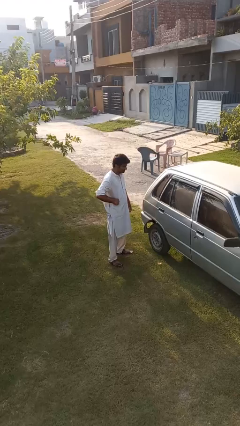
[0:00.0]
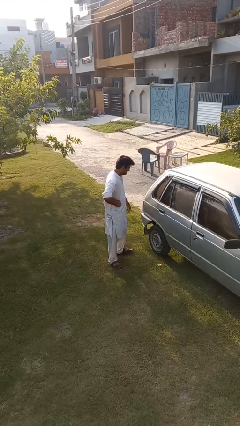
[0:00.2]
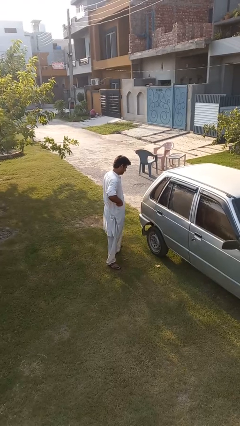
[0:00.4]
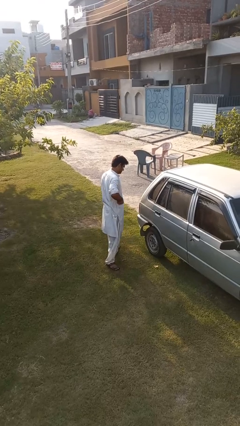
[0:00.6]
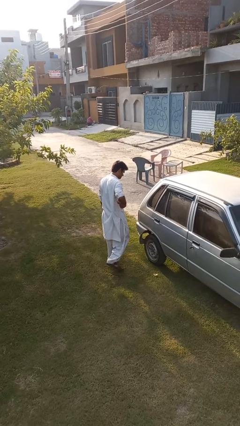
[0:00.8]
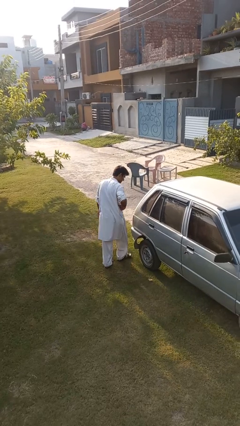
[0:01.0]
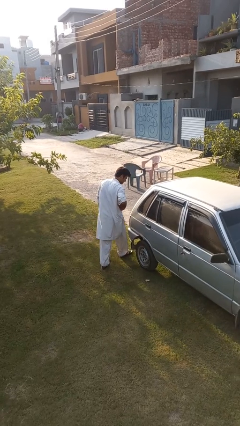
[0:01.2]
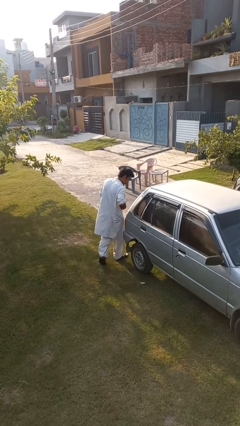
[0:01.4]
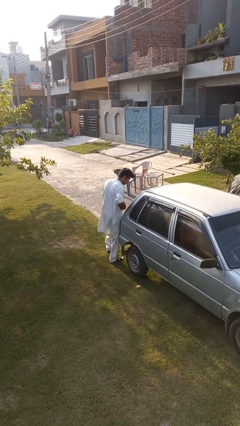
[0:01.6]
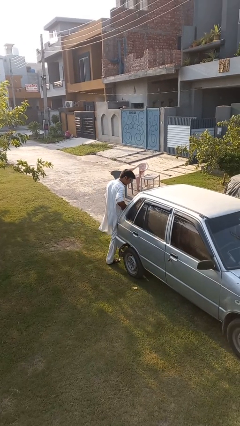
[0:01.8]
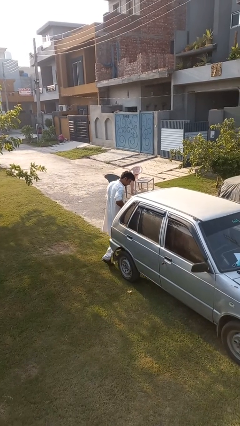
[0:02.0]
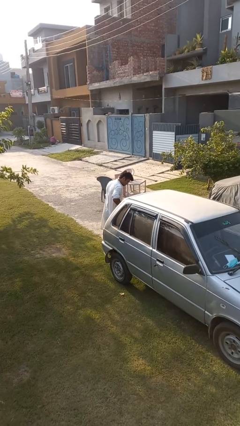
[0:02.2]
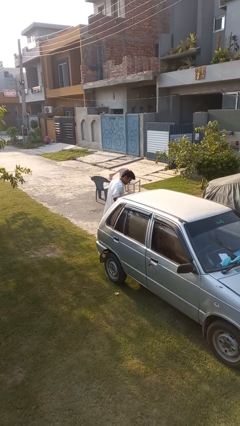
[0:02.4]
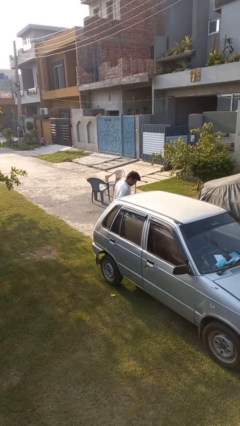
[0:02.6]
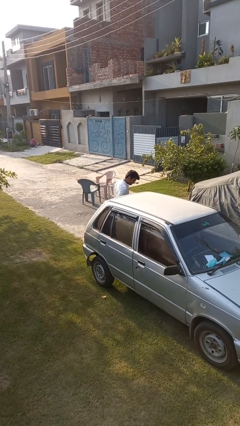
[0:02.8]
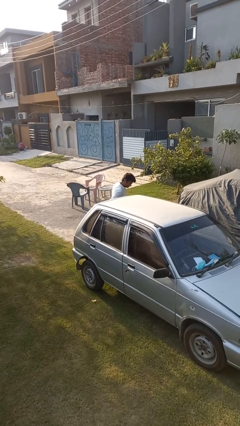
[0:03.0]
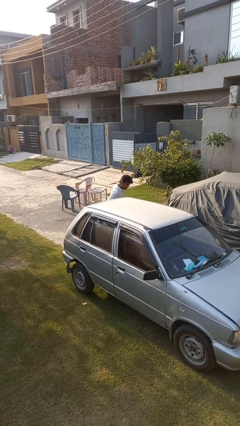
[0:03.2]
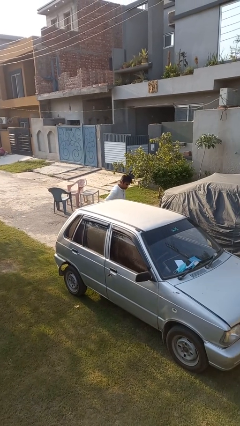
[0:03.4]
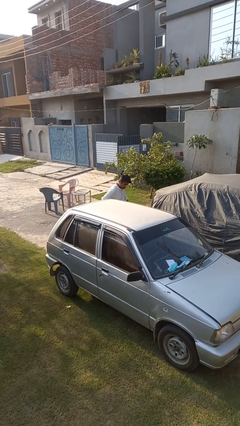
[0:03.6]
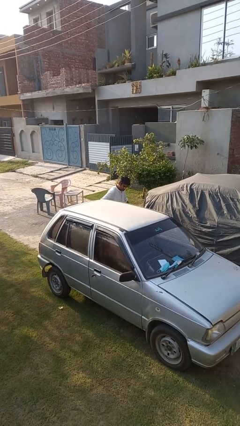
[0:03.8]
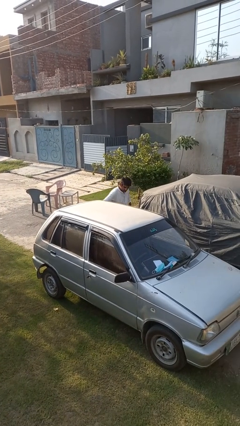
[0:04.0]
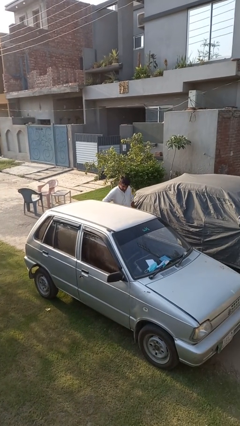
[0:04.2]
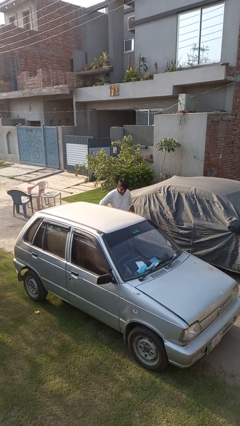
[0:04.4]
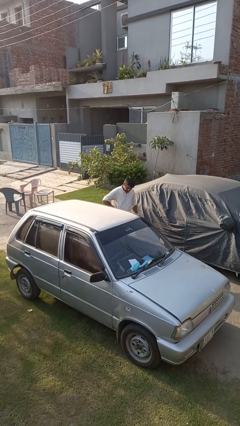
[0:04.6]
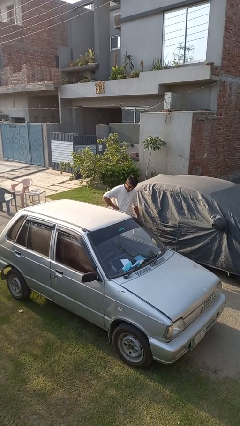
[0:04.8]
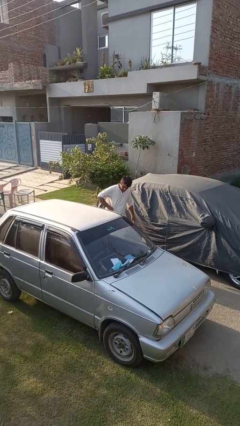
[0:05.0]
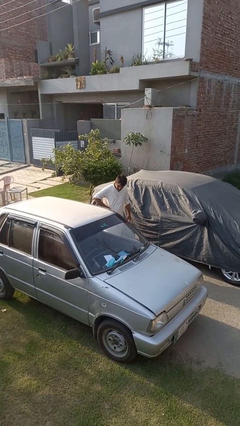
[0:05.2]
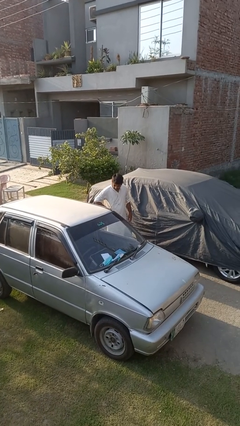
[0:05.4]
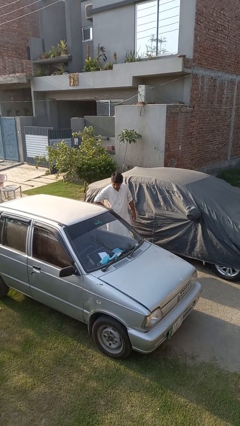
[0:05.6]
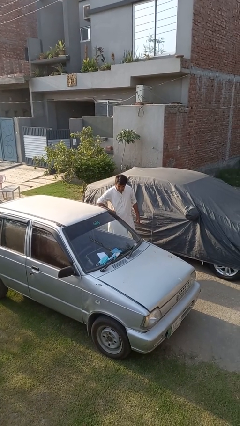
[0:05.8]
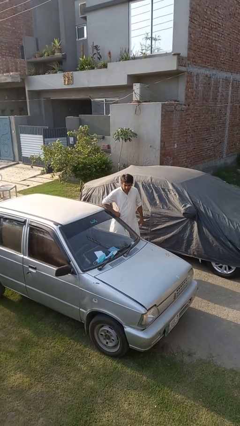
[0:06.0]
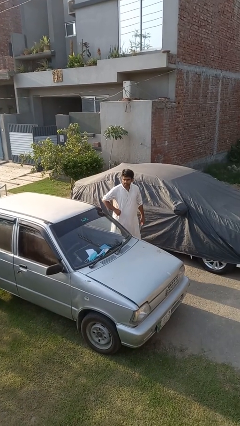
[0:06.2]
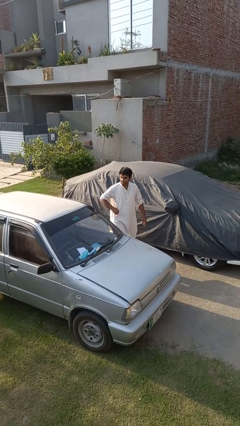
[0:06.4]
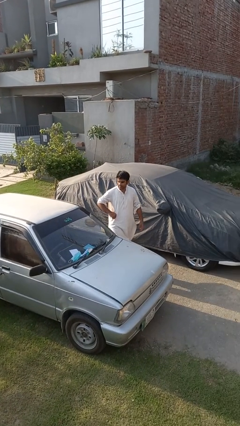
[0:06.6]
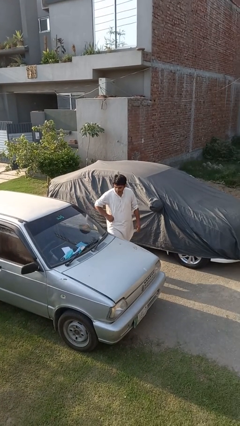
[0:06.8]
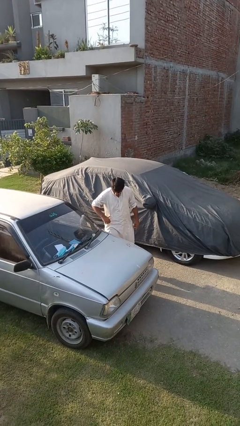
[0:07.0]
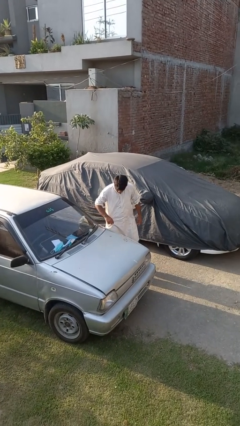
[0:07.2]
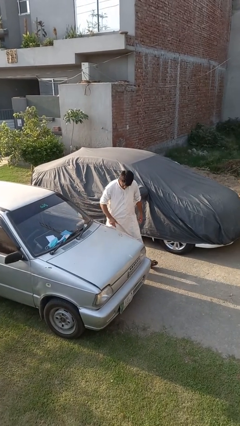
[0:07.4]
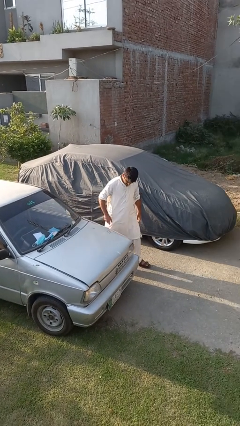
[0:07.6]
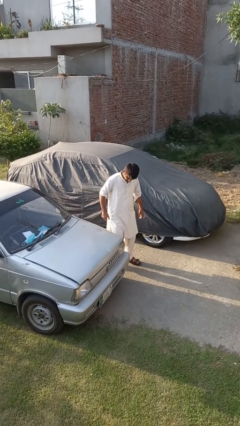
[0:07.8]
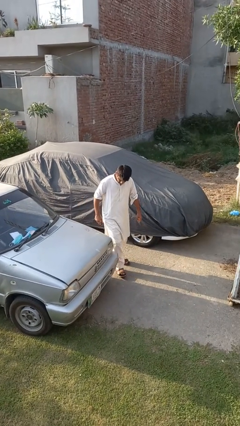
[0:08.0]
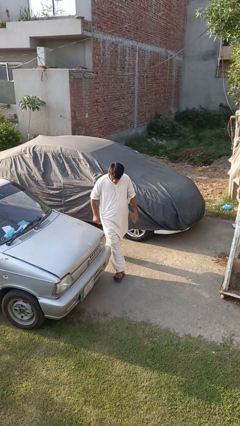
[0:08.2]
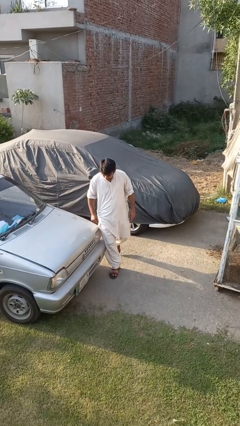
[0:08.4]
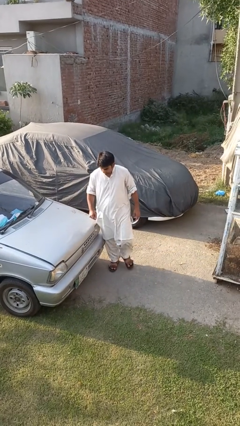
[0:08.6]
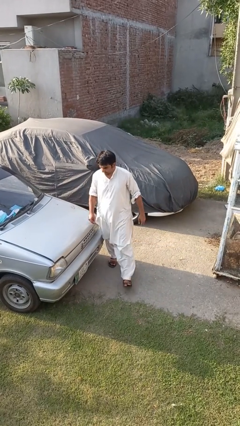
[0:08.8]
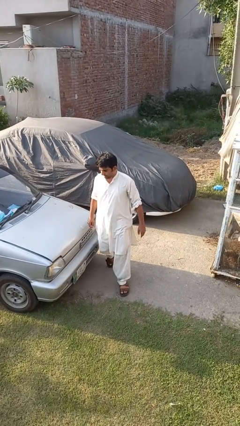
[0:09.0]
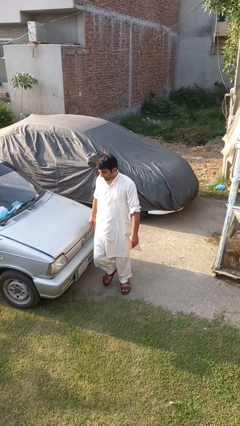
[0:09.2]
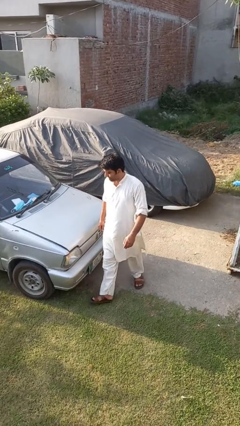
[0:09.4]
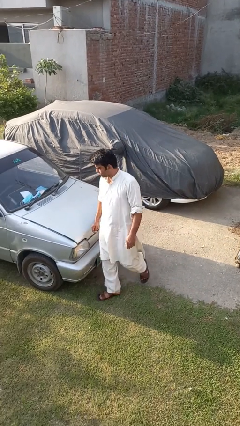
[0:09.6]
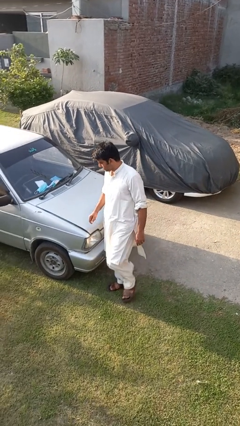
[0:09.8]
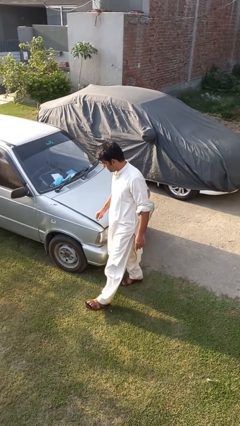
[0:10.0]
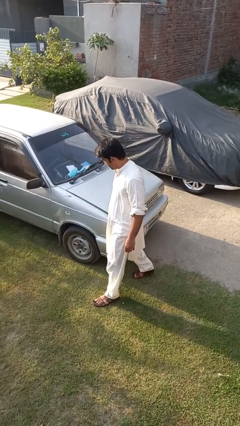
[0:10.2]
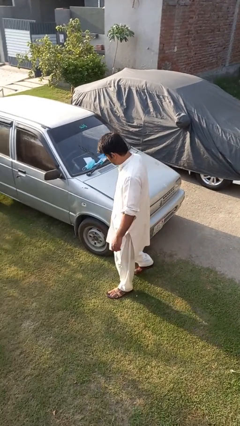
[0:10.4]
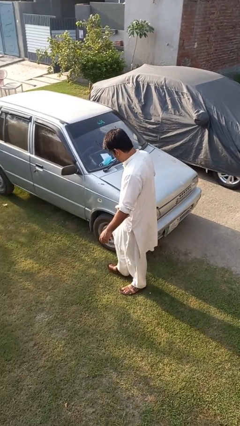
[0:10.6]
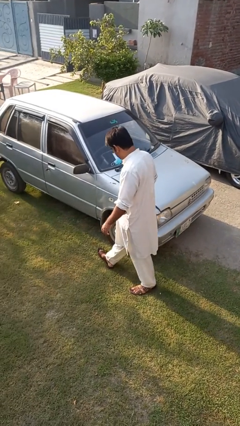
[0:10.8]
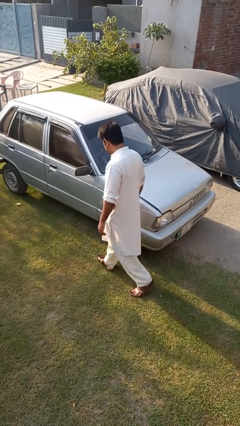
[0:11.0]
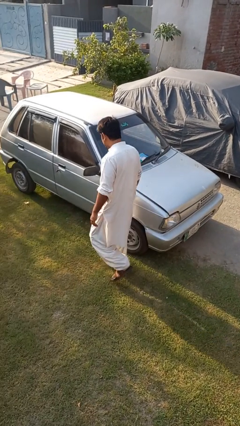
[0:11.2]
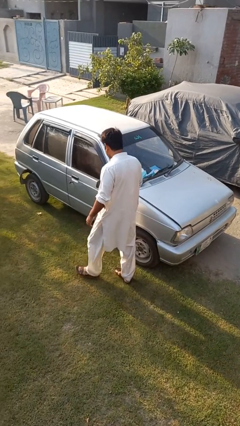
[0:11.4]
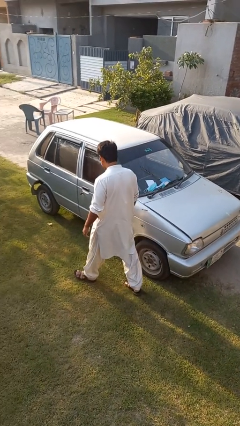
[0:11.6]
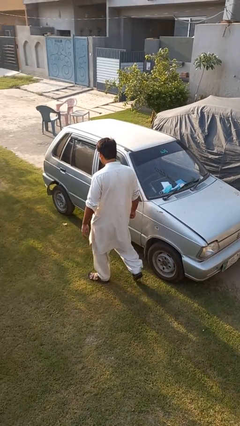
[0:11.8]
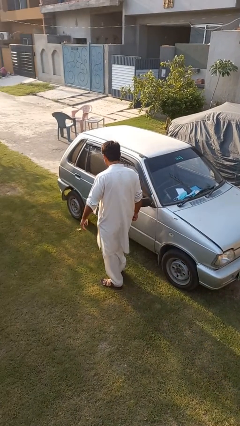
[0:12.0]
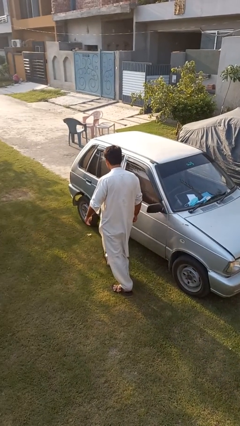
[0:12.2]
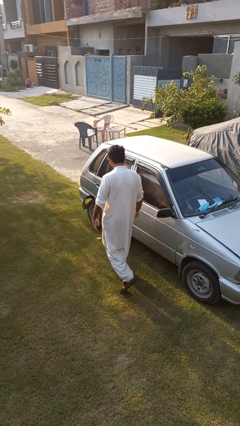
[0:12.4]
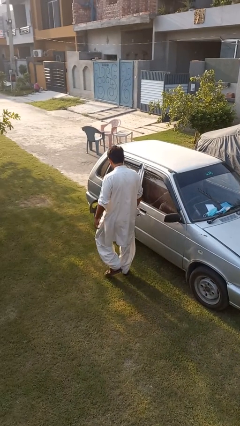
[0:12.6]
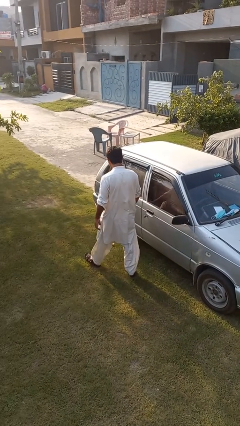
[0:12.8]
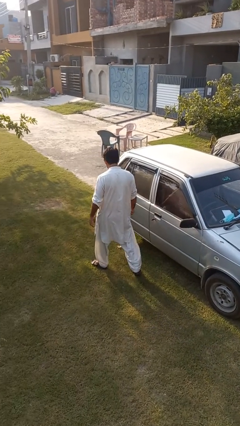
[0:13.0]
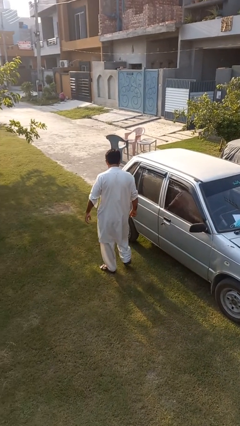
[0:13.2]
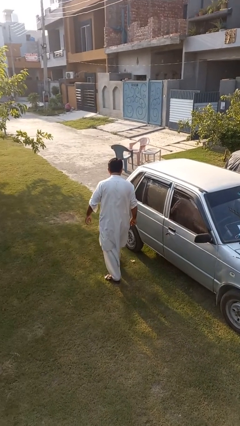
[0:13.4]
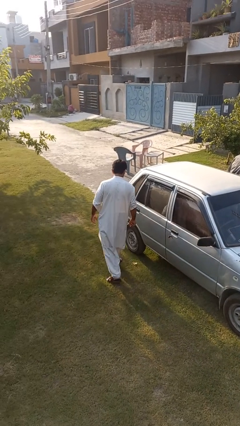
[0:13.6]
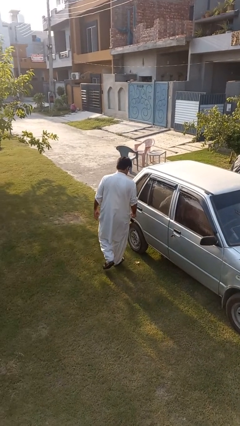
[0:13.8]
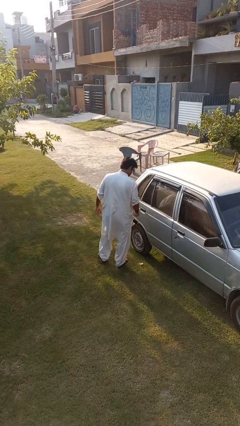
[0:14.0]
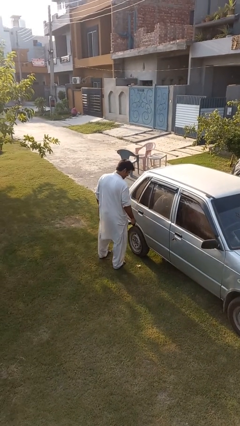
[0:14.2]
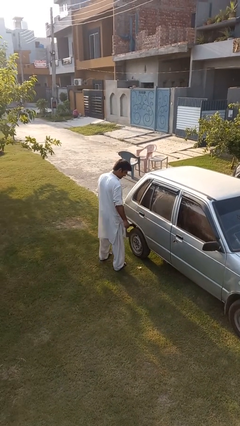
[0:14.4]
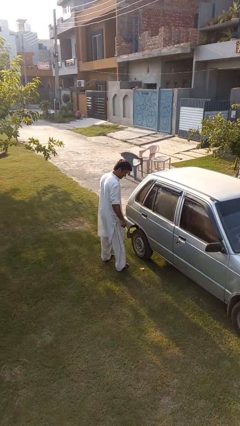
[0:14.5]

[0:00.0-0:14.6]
person walks around car

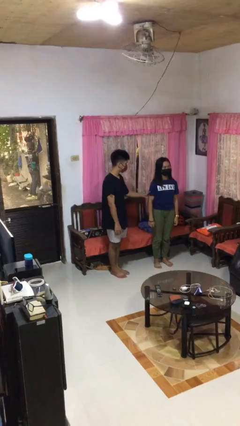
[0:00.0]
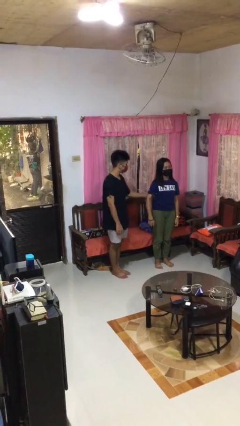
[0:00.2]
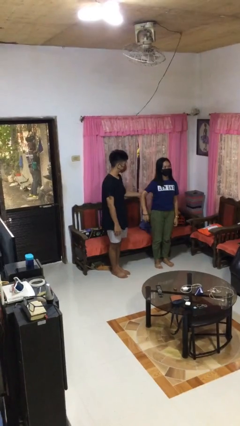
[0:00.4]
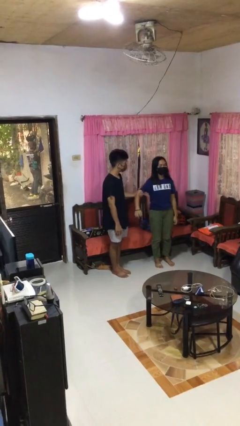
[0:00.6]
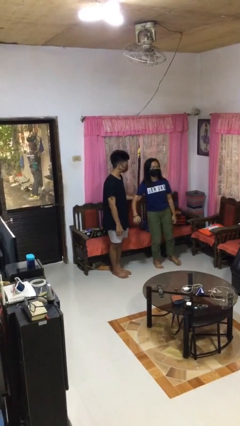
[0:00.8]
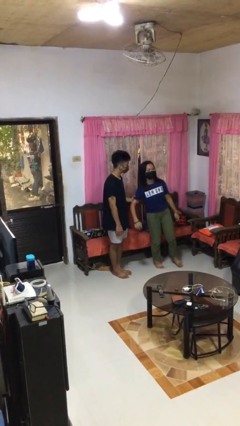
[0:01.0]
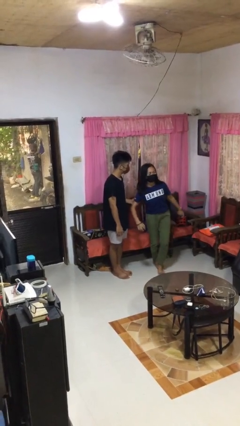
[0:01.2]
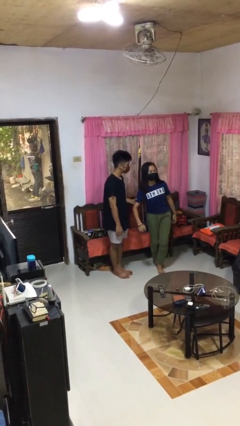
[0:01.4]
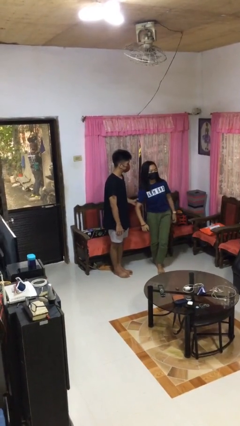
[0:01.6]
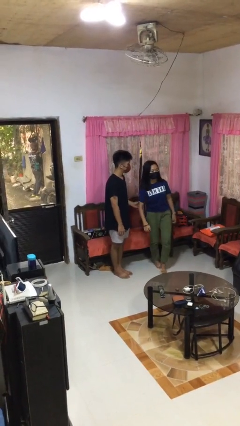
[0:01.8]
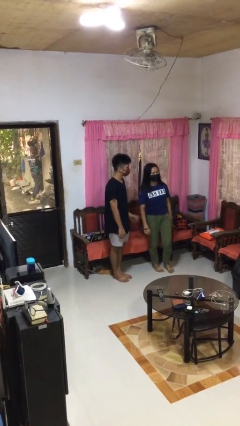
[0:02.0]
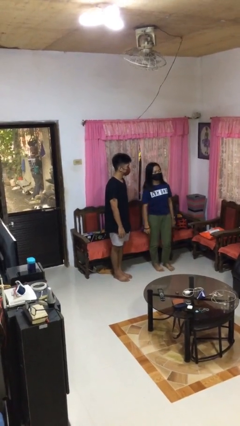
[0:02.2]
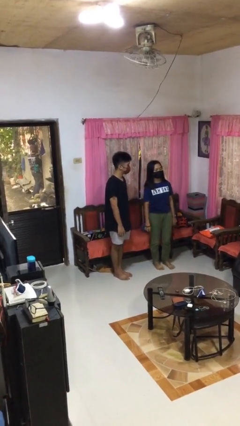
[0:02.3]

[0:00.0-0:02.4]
person grabs person by bicep

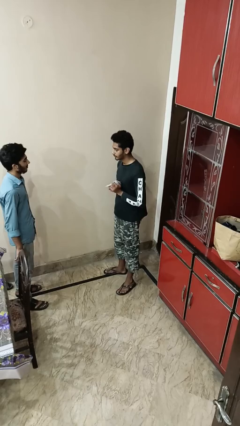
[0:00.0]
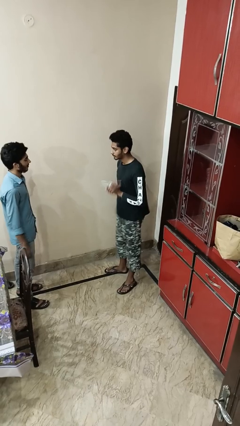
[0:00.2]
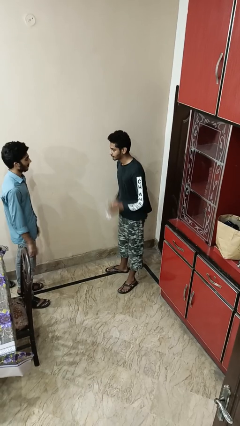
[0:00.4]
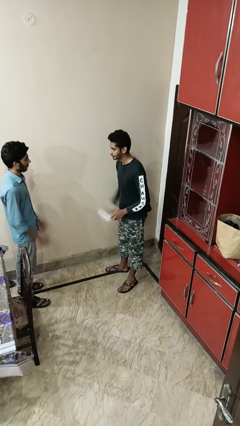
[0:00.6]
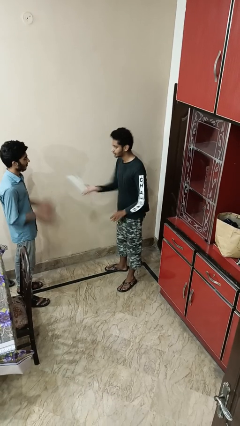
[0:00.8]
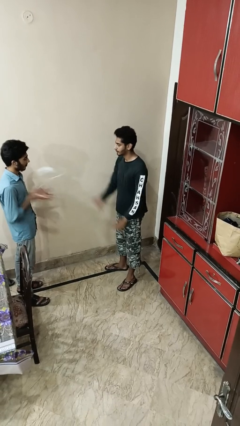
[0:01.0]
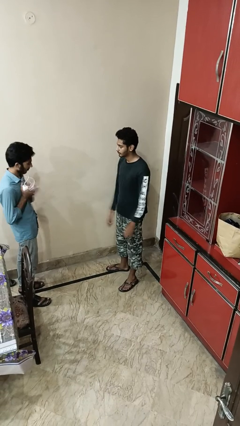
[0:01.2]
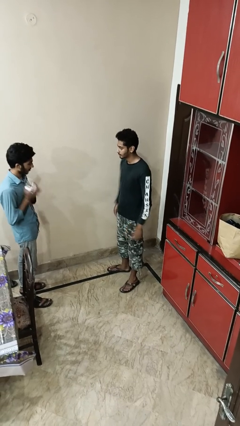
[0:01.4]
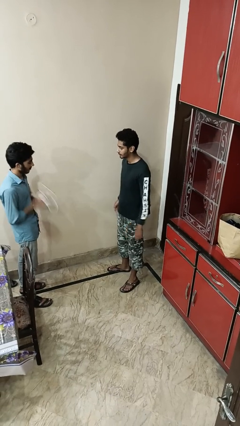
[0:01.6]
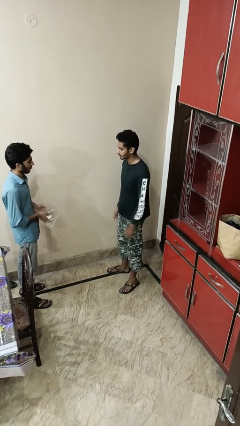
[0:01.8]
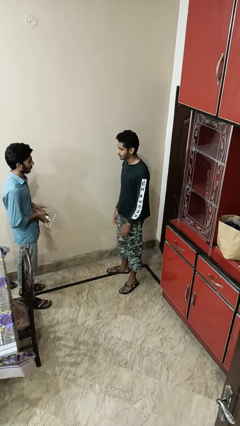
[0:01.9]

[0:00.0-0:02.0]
person throws object to person
